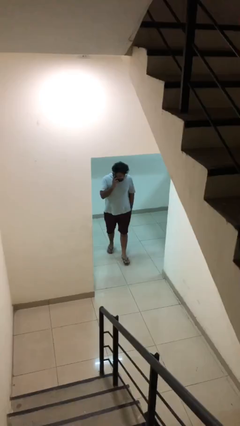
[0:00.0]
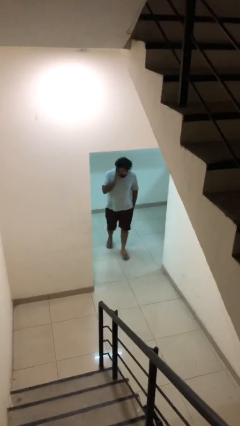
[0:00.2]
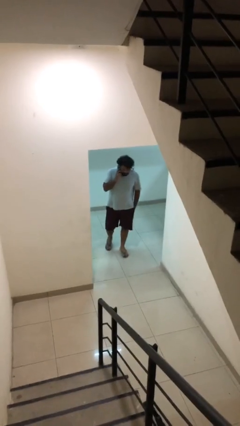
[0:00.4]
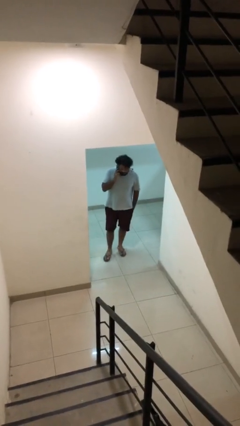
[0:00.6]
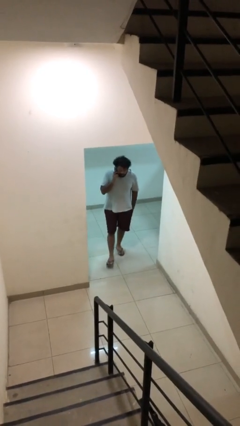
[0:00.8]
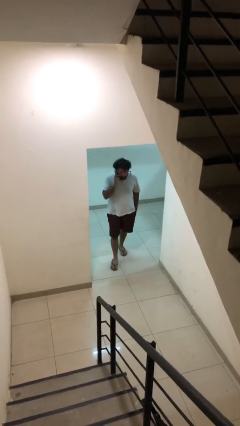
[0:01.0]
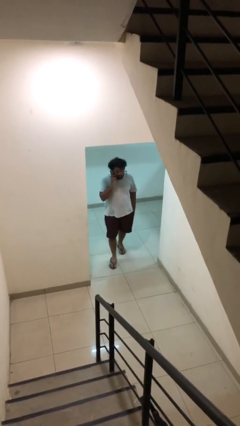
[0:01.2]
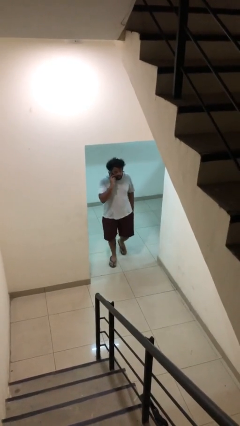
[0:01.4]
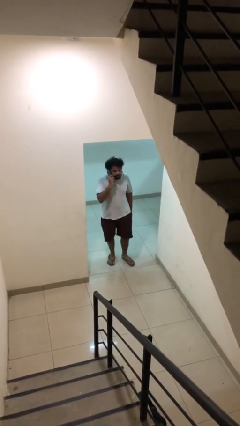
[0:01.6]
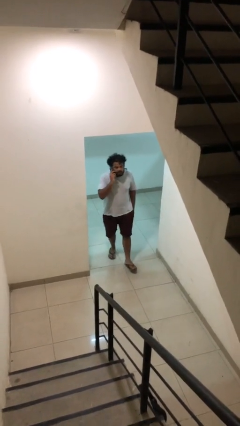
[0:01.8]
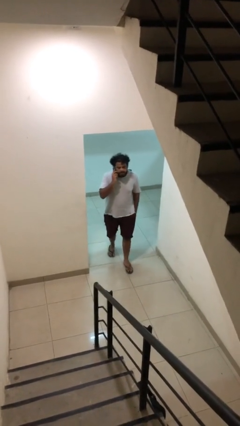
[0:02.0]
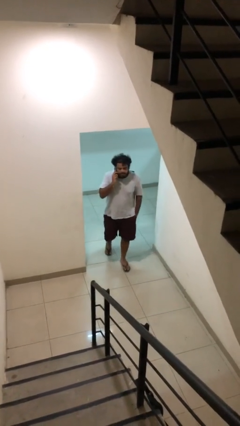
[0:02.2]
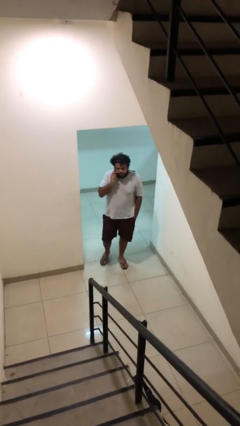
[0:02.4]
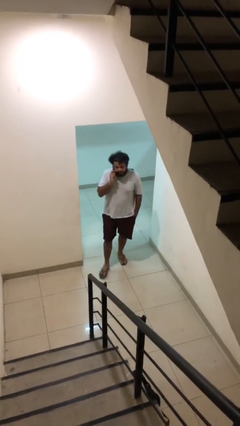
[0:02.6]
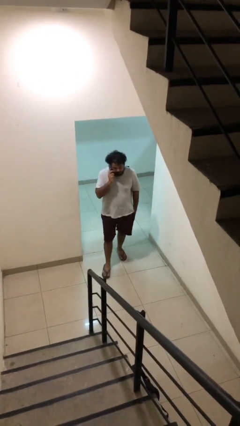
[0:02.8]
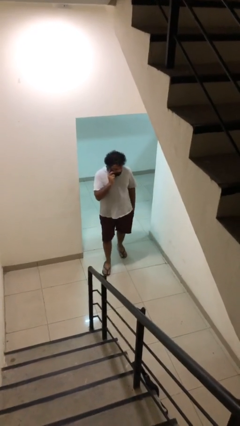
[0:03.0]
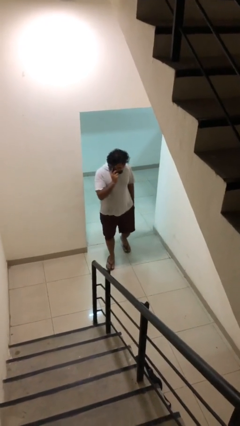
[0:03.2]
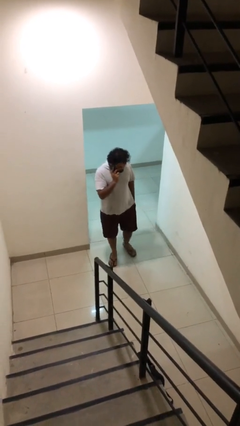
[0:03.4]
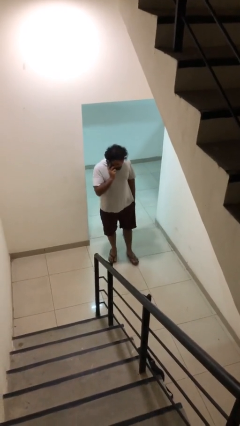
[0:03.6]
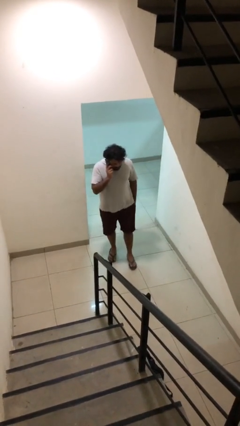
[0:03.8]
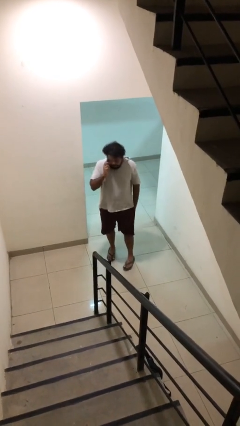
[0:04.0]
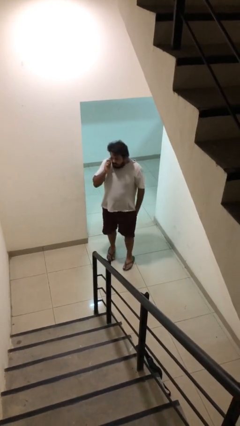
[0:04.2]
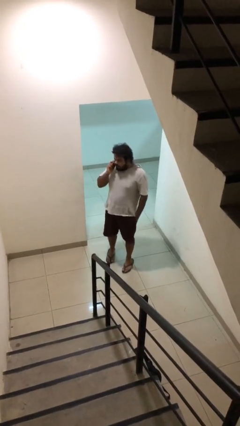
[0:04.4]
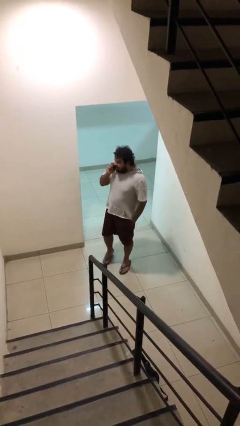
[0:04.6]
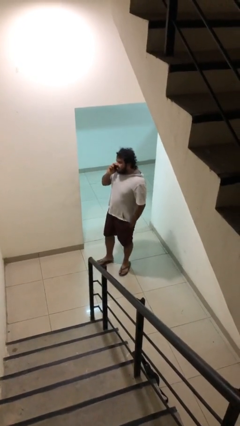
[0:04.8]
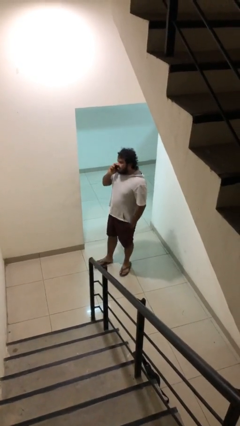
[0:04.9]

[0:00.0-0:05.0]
person enters scene through structure

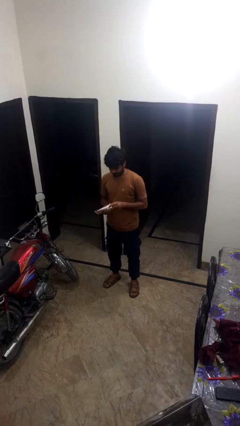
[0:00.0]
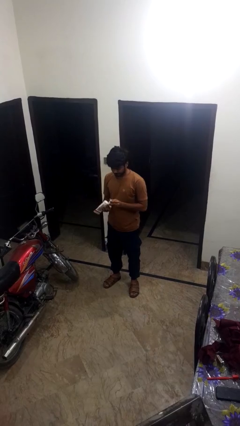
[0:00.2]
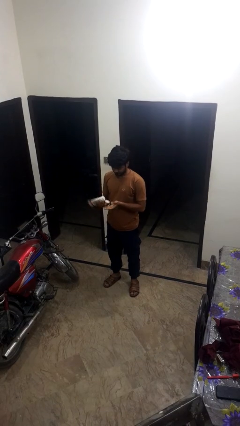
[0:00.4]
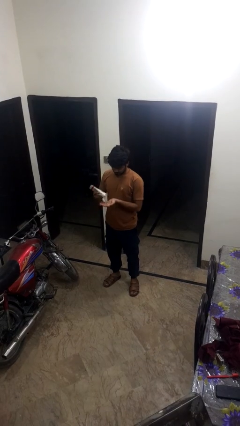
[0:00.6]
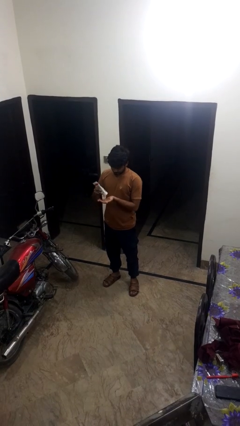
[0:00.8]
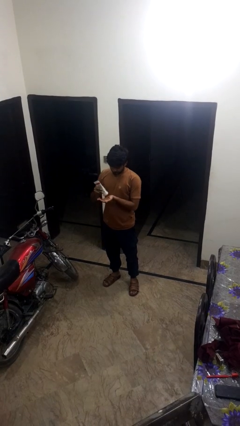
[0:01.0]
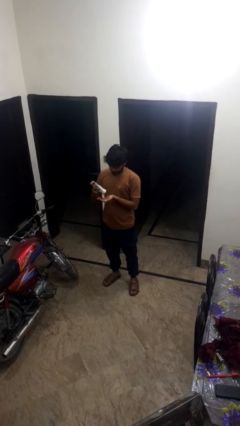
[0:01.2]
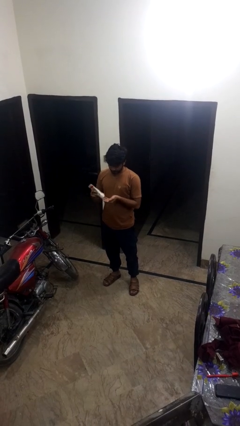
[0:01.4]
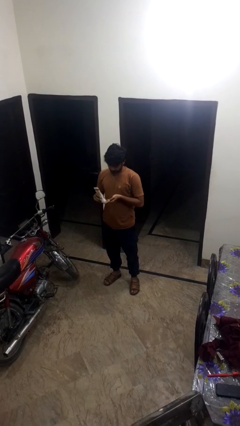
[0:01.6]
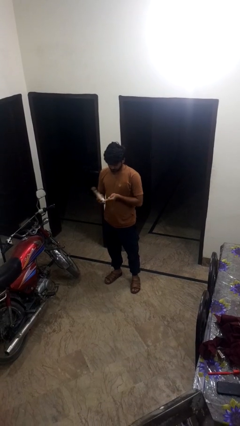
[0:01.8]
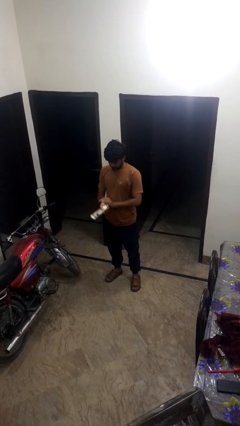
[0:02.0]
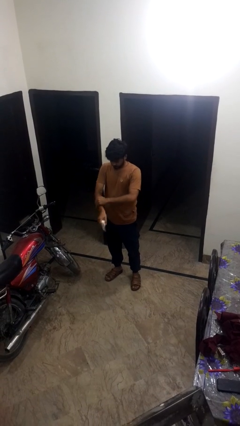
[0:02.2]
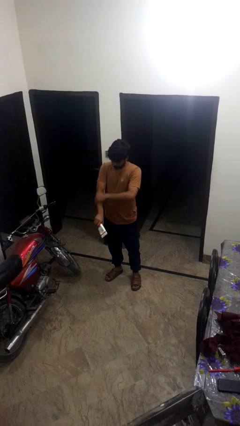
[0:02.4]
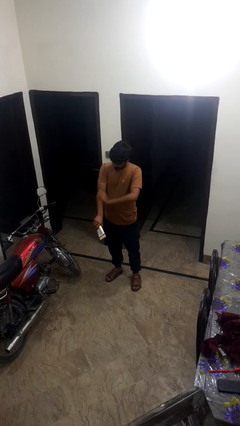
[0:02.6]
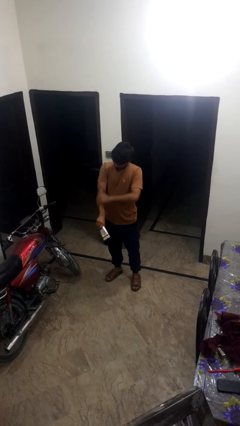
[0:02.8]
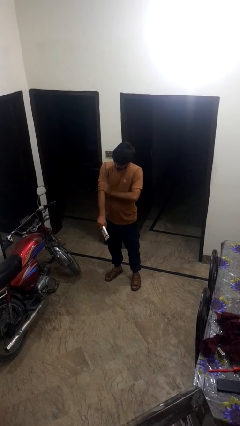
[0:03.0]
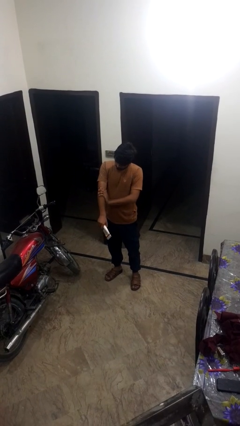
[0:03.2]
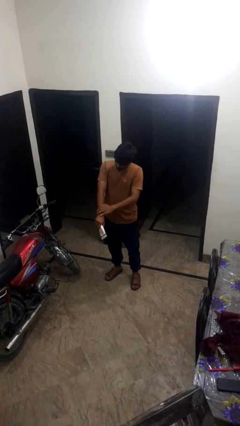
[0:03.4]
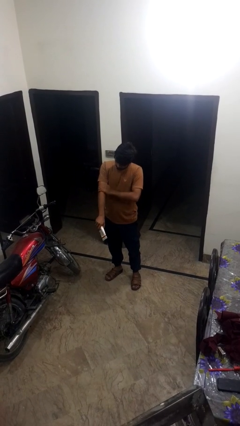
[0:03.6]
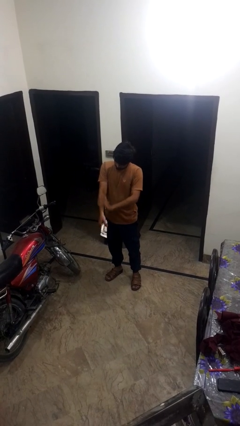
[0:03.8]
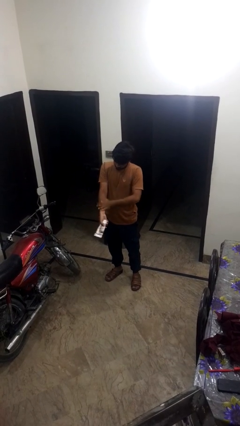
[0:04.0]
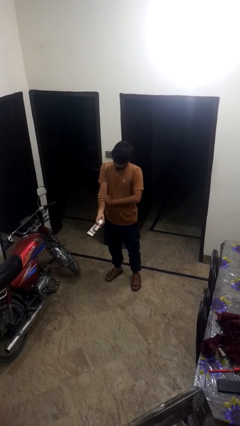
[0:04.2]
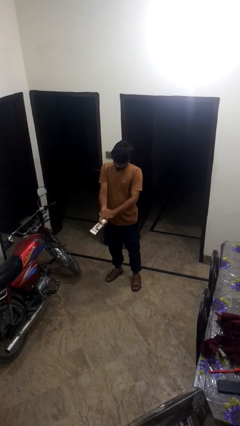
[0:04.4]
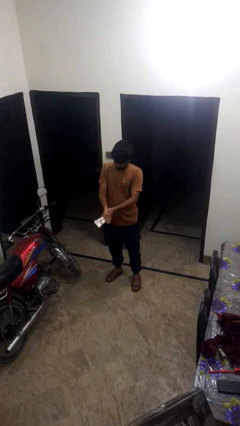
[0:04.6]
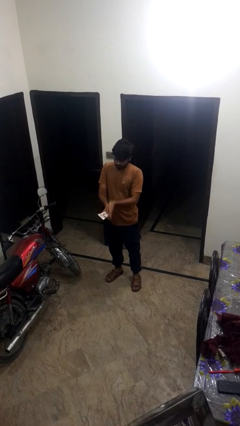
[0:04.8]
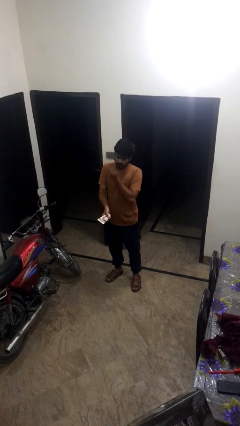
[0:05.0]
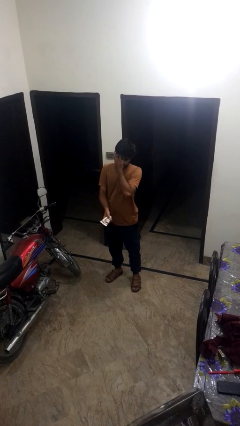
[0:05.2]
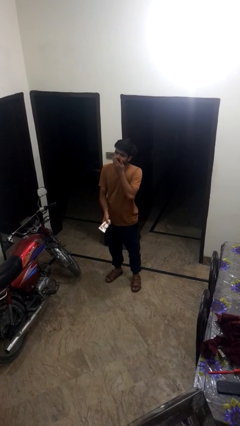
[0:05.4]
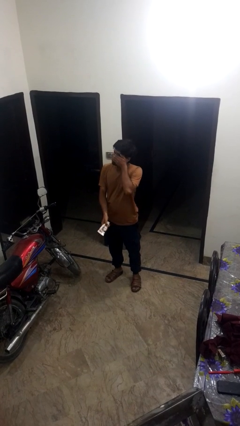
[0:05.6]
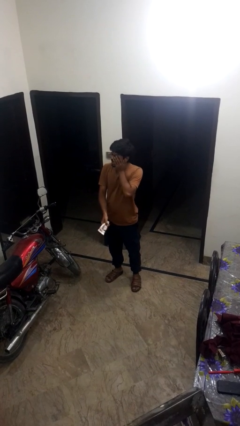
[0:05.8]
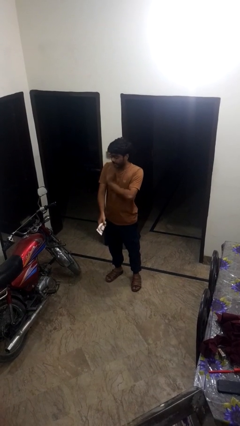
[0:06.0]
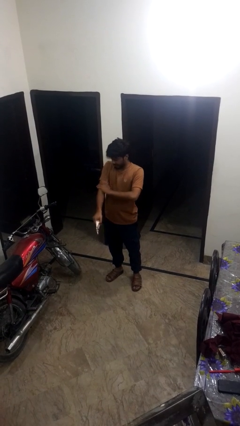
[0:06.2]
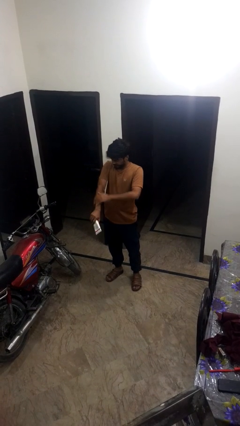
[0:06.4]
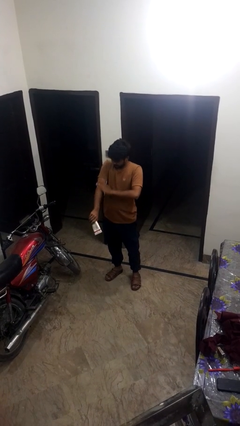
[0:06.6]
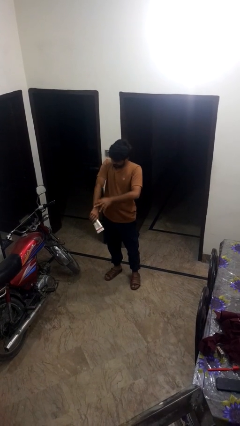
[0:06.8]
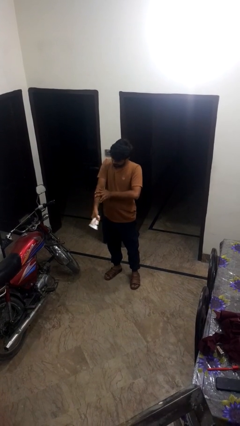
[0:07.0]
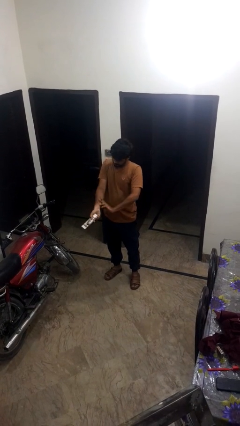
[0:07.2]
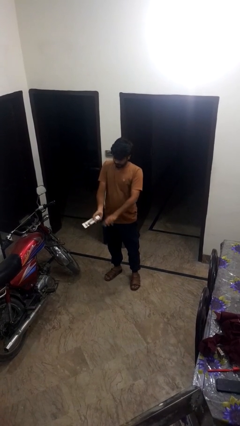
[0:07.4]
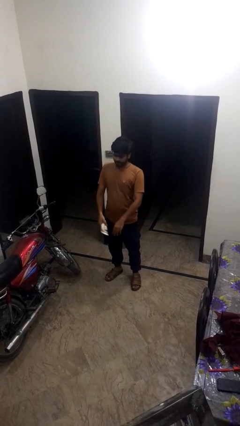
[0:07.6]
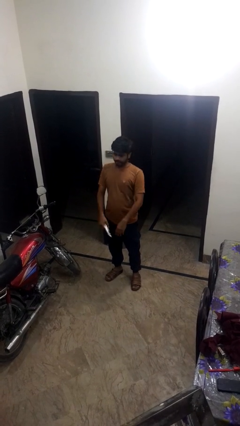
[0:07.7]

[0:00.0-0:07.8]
person applies sunscreen

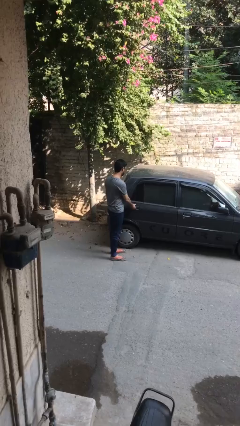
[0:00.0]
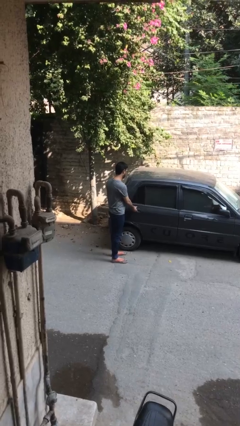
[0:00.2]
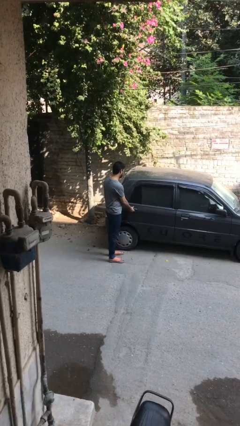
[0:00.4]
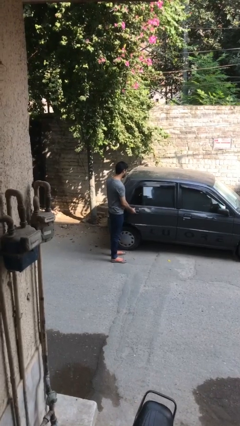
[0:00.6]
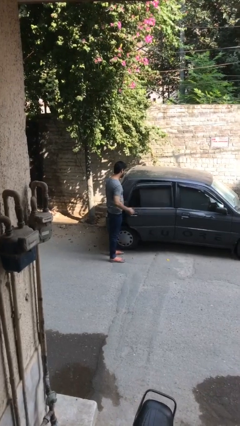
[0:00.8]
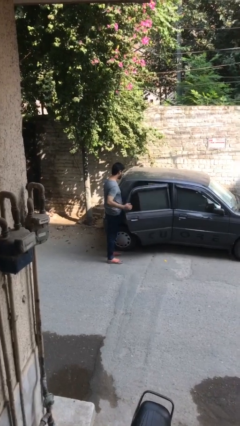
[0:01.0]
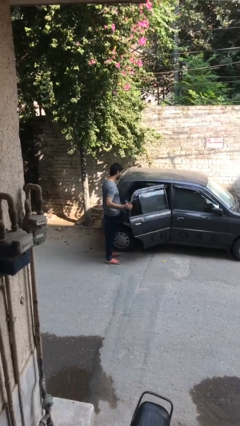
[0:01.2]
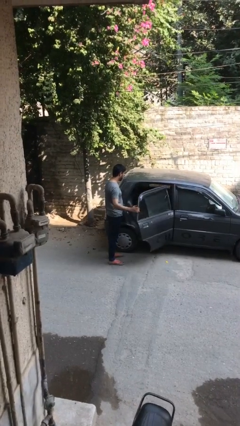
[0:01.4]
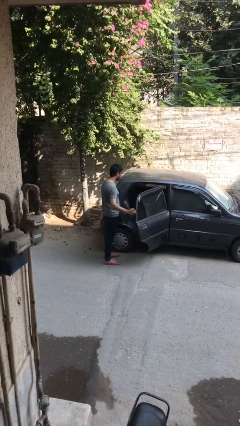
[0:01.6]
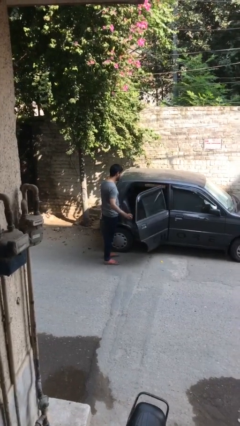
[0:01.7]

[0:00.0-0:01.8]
person opens car door

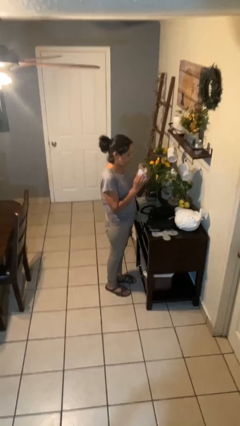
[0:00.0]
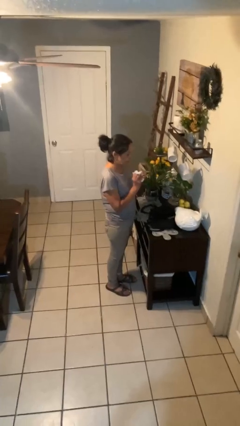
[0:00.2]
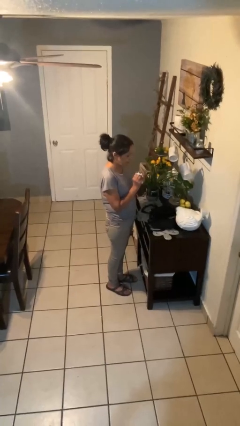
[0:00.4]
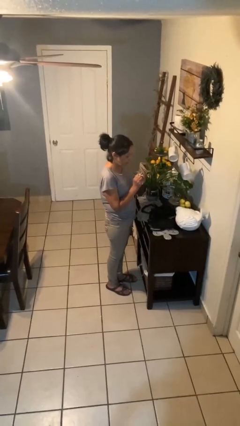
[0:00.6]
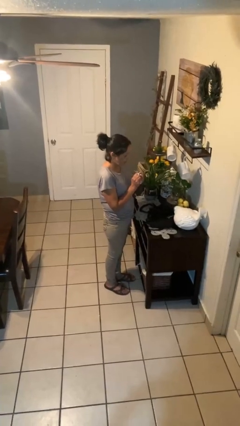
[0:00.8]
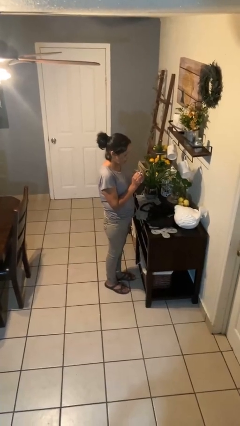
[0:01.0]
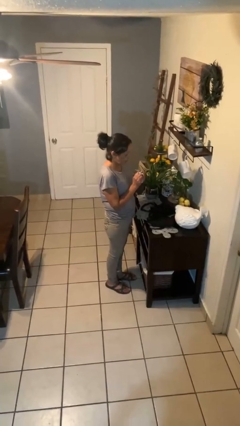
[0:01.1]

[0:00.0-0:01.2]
person crumples paper

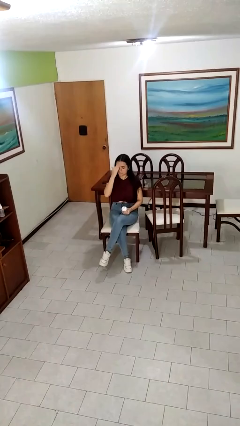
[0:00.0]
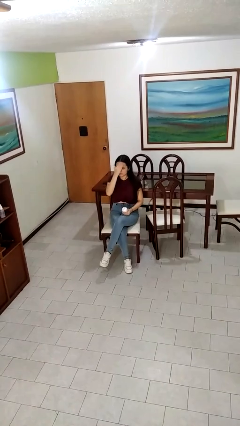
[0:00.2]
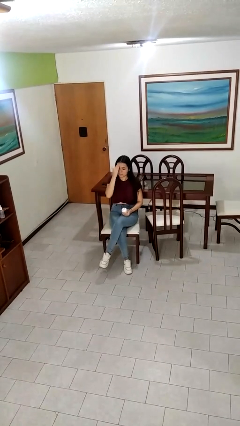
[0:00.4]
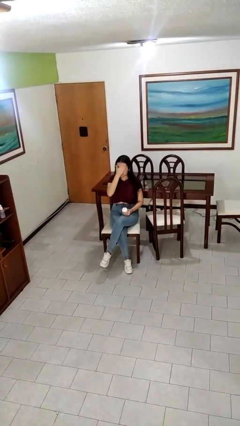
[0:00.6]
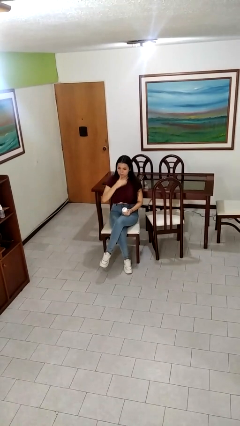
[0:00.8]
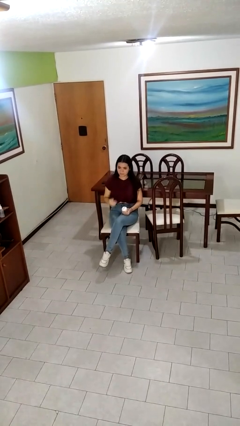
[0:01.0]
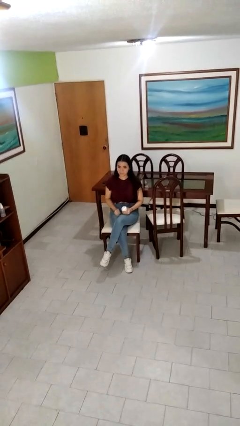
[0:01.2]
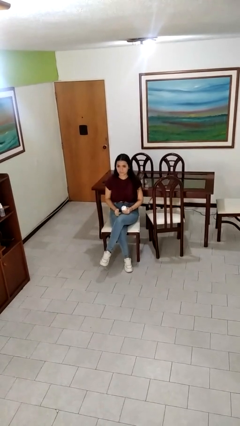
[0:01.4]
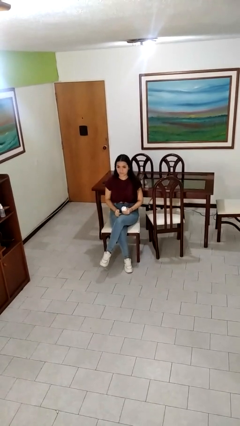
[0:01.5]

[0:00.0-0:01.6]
person applies facial moisturizer

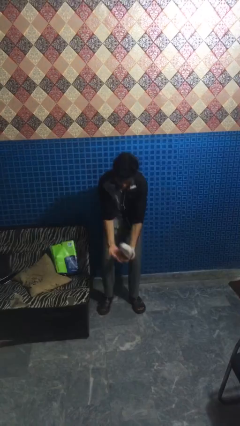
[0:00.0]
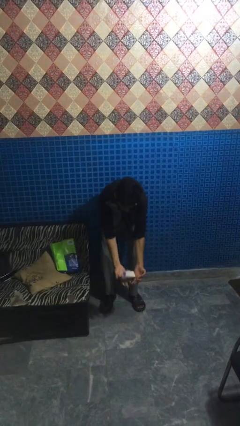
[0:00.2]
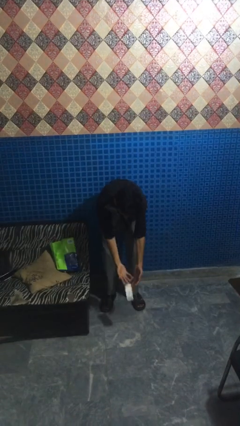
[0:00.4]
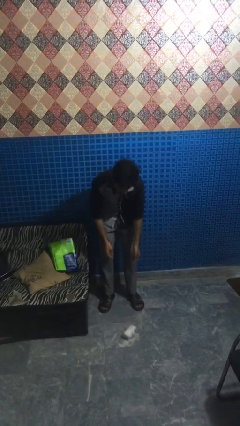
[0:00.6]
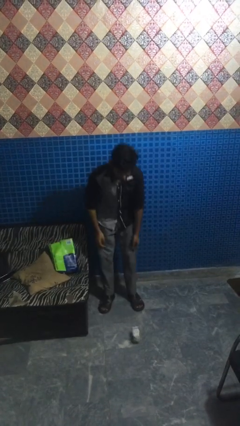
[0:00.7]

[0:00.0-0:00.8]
person catches dropped object
